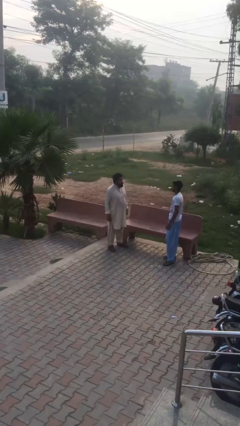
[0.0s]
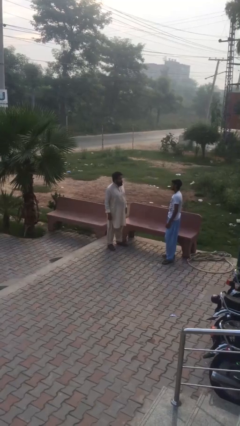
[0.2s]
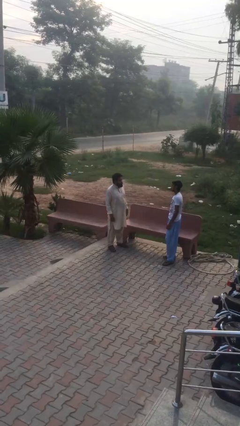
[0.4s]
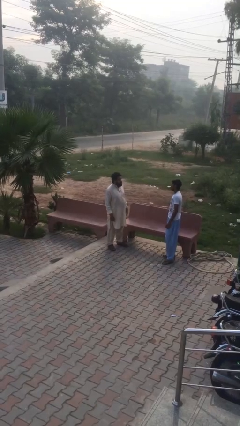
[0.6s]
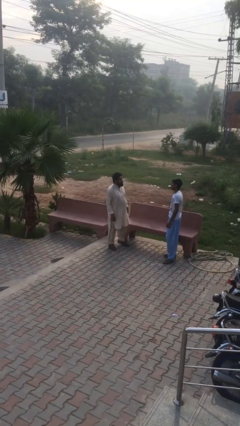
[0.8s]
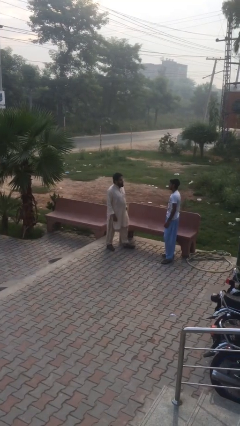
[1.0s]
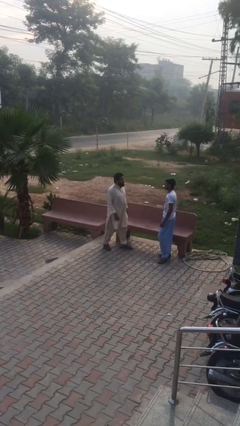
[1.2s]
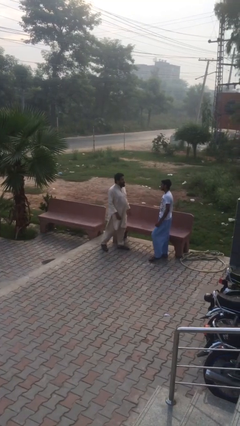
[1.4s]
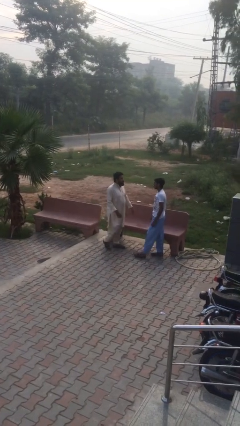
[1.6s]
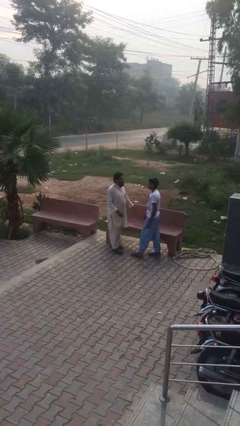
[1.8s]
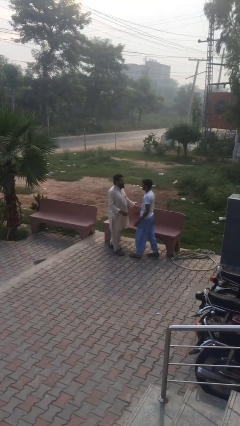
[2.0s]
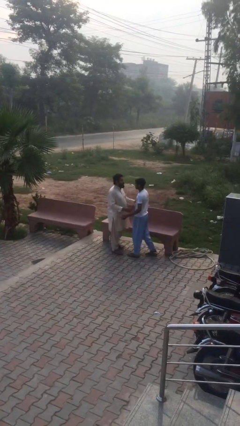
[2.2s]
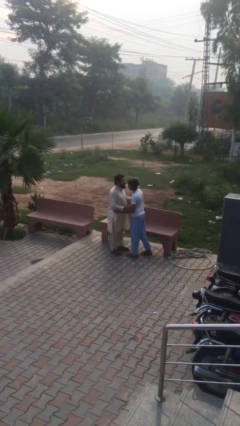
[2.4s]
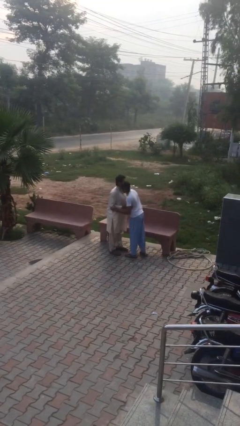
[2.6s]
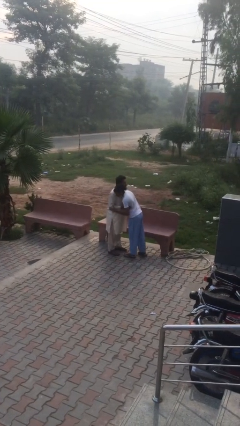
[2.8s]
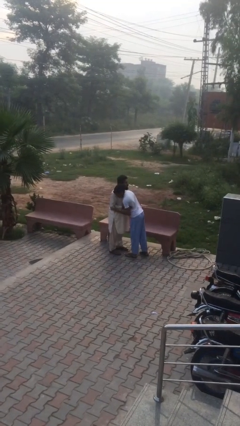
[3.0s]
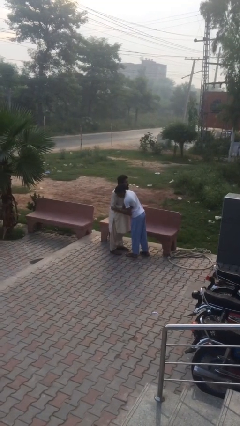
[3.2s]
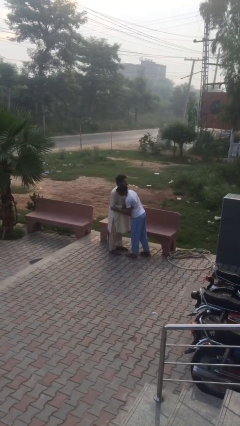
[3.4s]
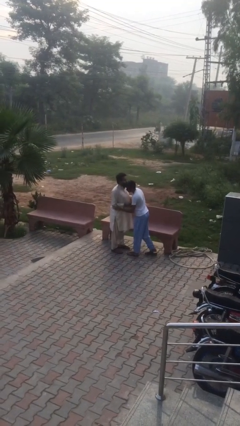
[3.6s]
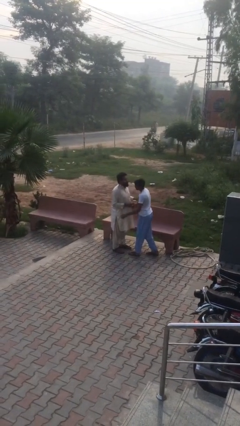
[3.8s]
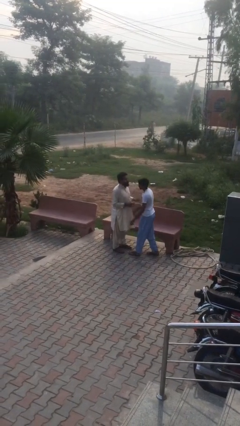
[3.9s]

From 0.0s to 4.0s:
person embraces person

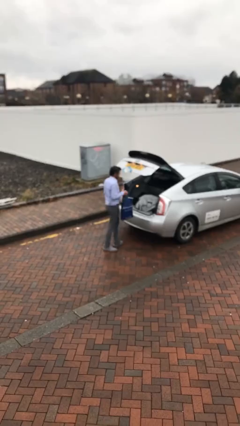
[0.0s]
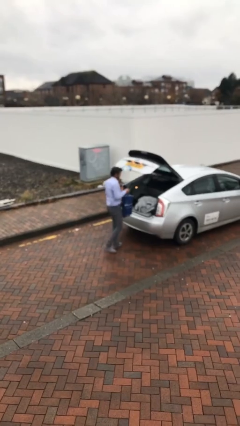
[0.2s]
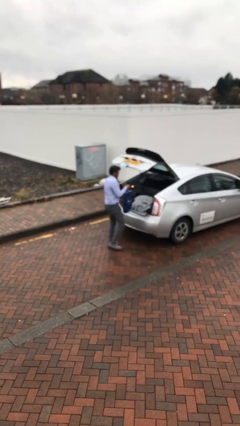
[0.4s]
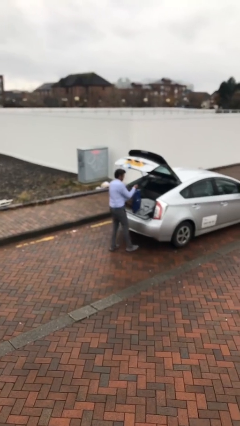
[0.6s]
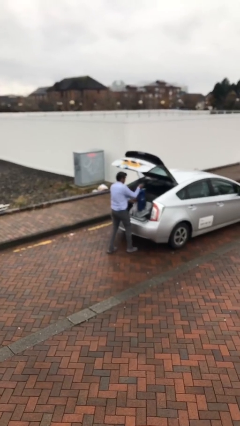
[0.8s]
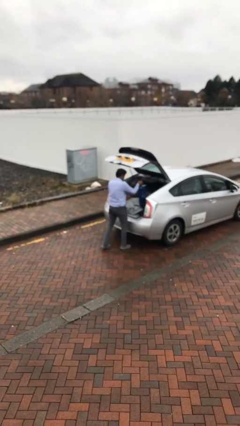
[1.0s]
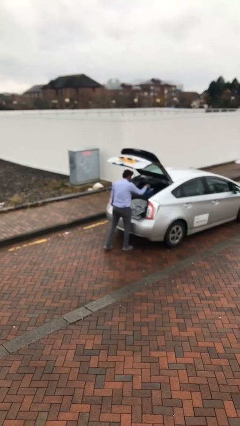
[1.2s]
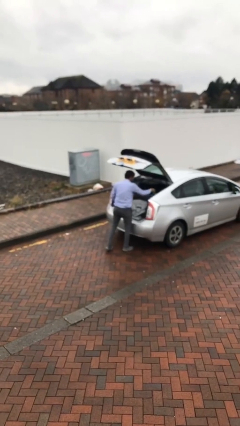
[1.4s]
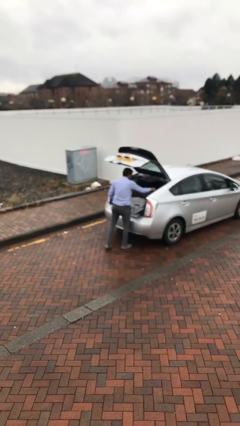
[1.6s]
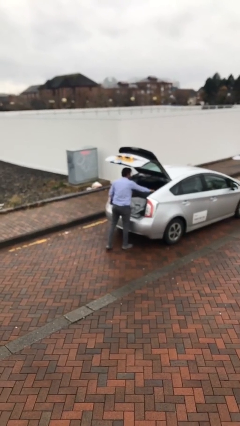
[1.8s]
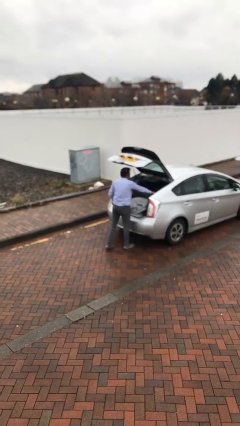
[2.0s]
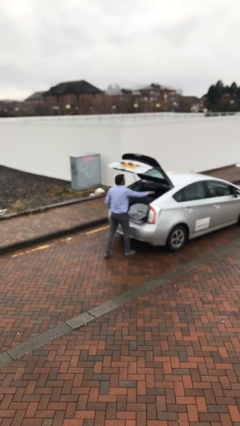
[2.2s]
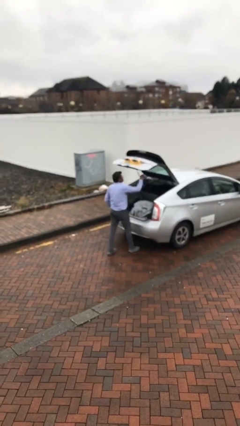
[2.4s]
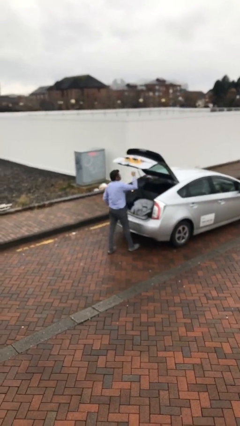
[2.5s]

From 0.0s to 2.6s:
person loads car

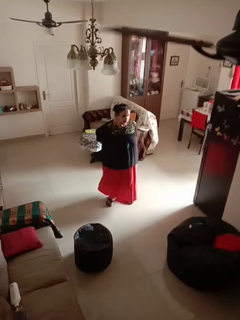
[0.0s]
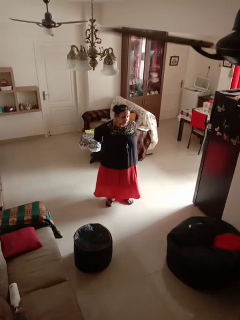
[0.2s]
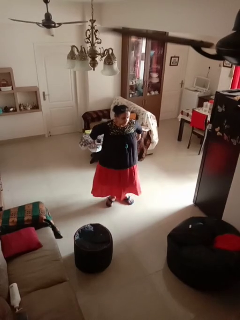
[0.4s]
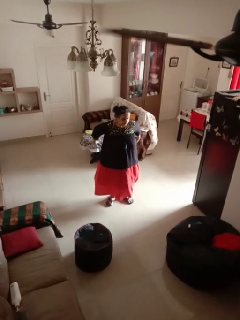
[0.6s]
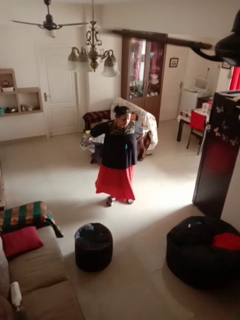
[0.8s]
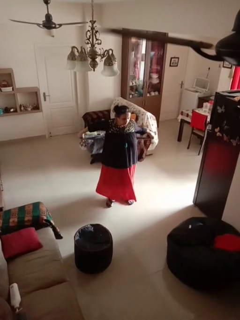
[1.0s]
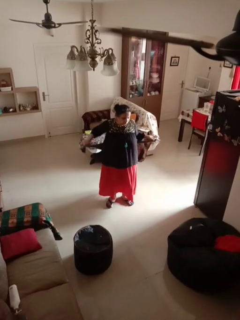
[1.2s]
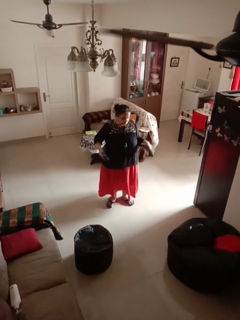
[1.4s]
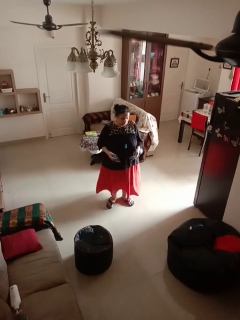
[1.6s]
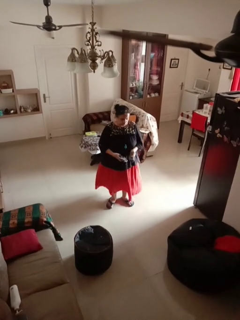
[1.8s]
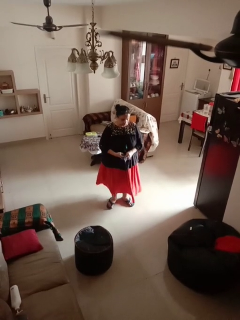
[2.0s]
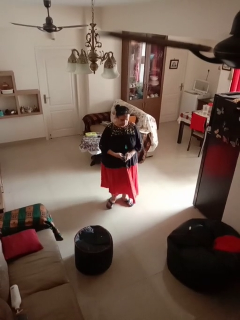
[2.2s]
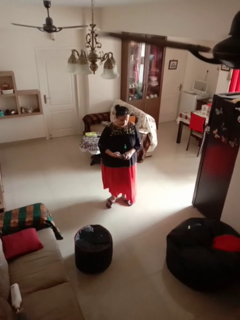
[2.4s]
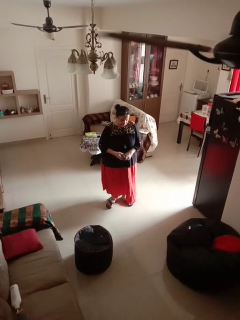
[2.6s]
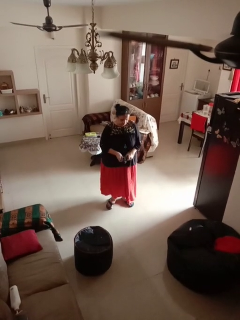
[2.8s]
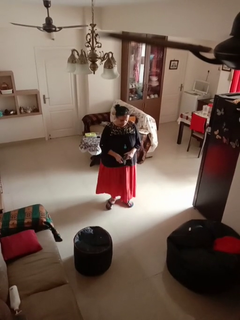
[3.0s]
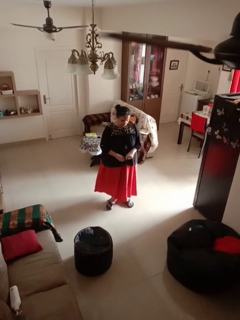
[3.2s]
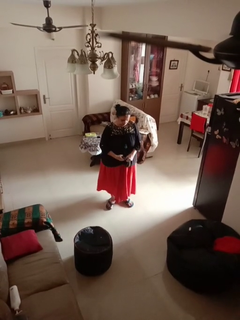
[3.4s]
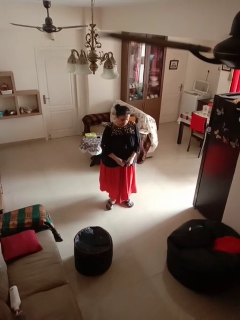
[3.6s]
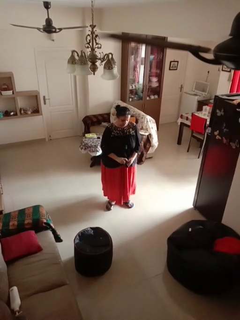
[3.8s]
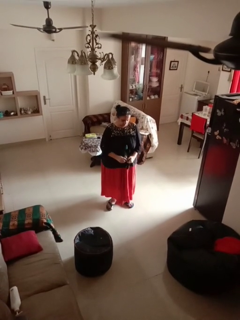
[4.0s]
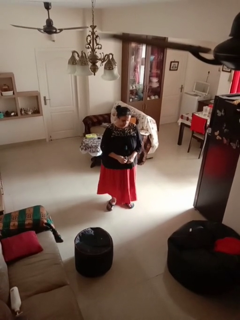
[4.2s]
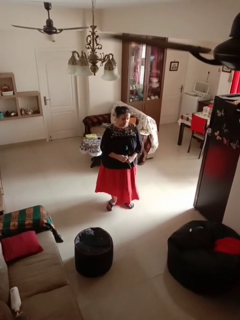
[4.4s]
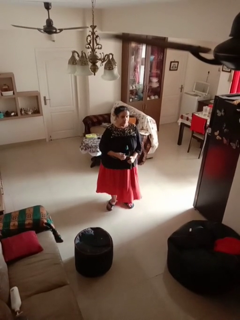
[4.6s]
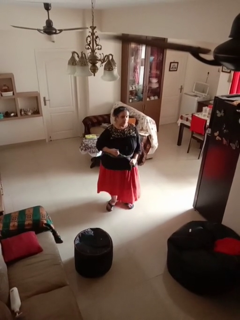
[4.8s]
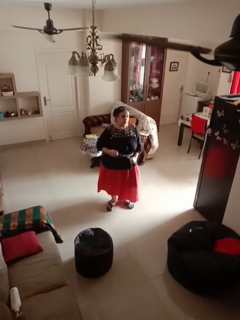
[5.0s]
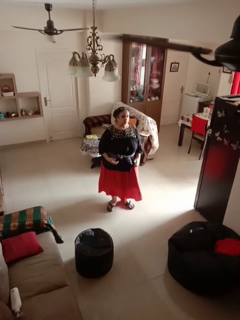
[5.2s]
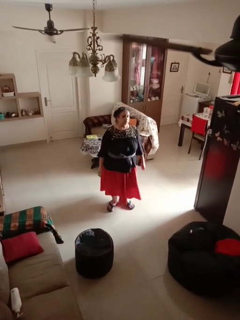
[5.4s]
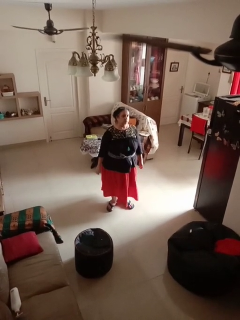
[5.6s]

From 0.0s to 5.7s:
person ties jacket around waist

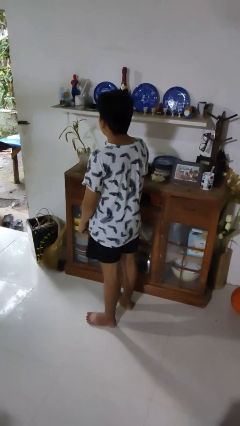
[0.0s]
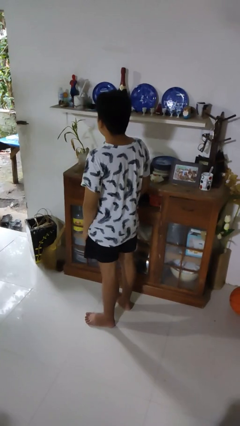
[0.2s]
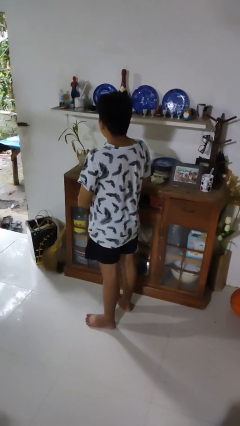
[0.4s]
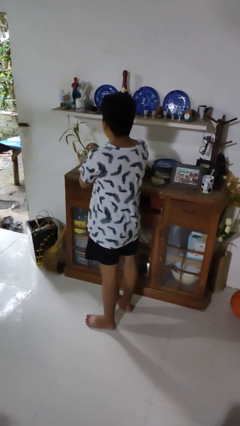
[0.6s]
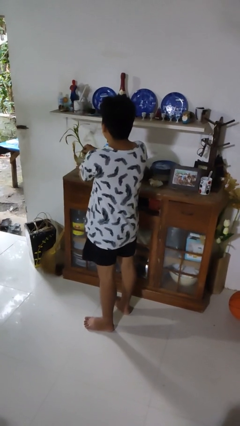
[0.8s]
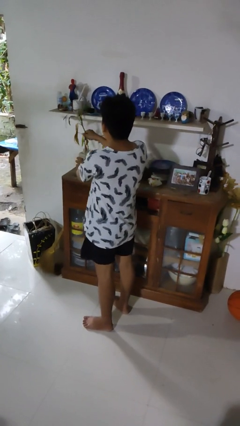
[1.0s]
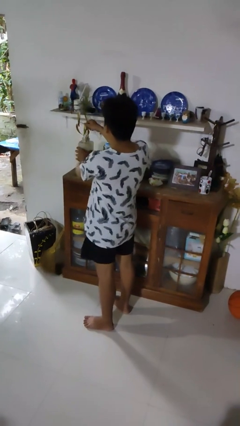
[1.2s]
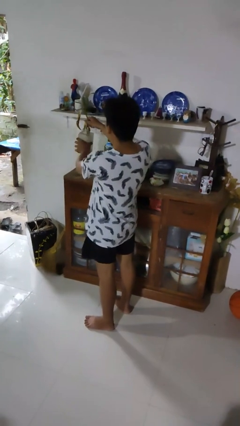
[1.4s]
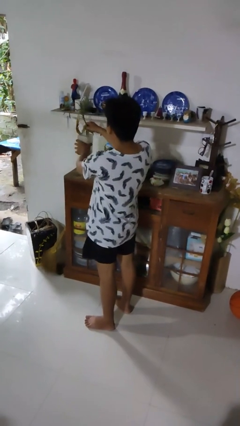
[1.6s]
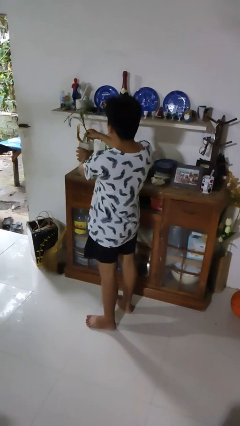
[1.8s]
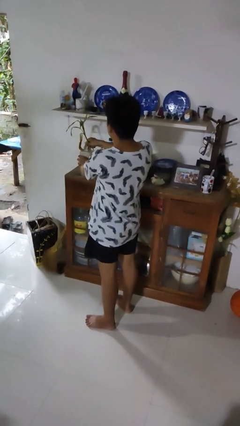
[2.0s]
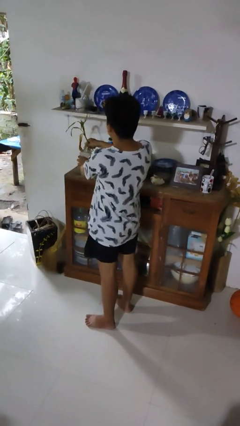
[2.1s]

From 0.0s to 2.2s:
person arranges flowers in vase

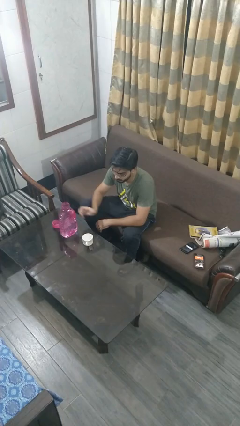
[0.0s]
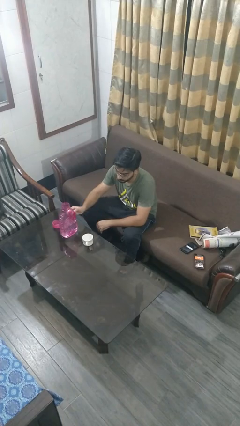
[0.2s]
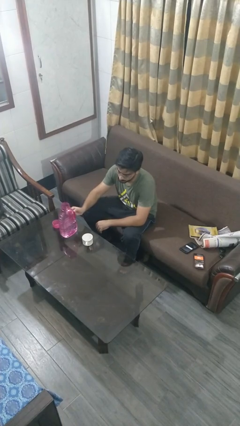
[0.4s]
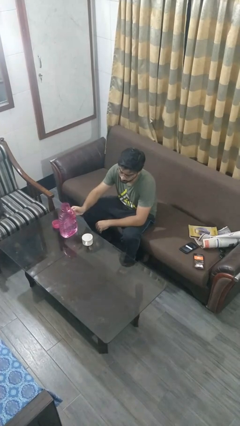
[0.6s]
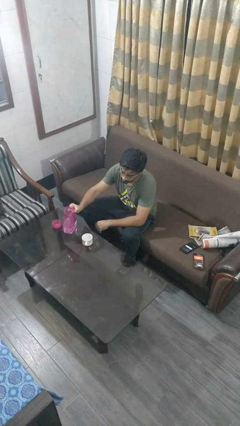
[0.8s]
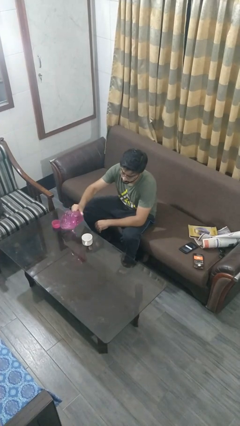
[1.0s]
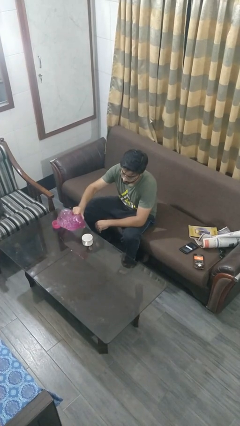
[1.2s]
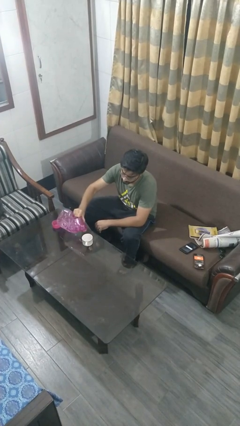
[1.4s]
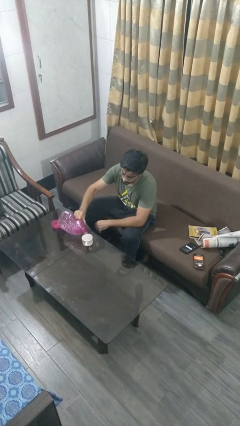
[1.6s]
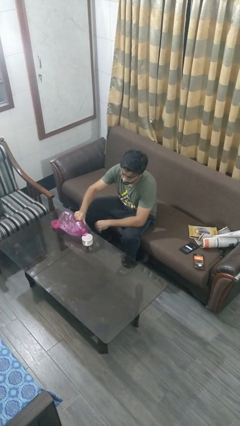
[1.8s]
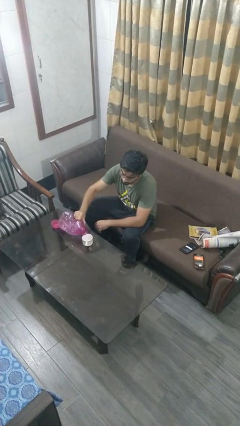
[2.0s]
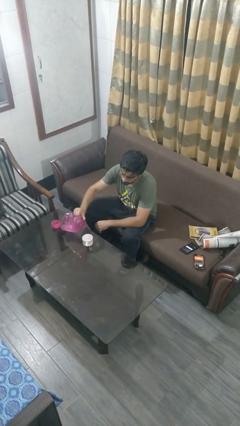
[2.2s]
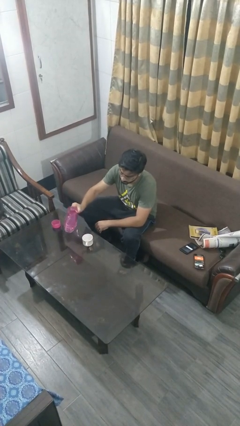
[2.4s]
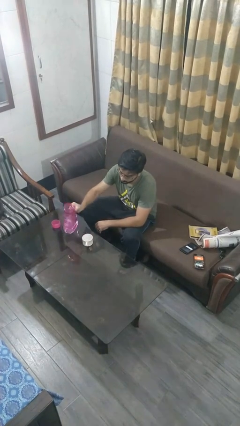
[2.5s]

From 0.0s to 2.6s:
person pours liquid into cup

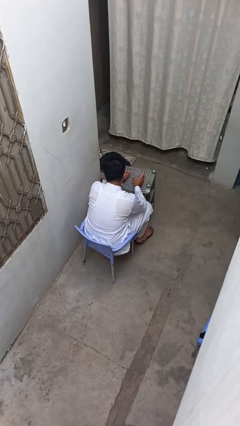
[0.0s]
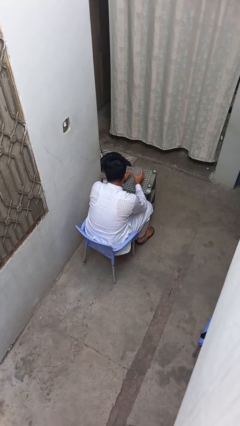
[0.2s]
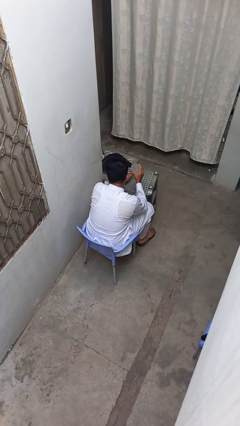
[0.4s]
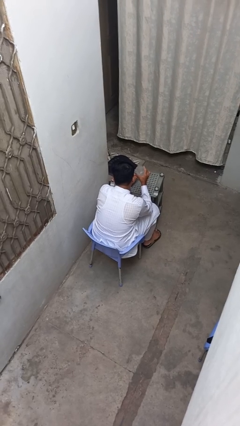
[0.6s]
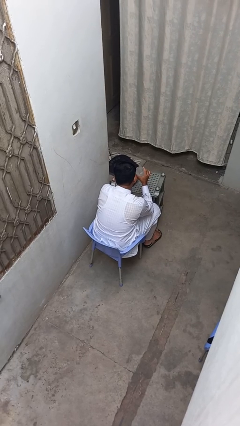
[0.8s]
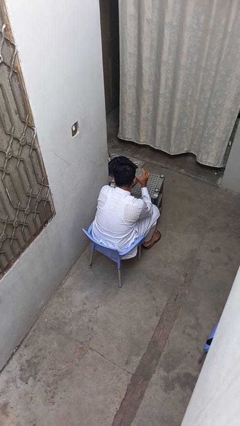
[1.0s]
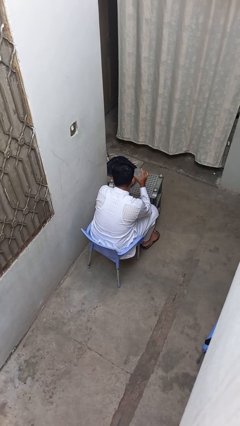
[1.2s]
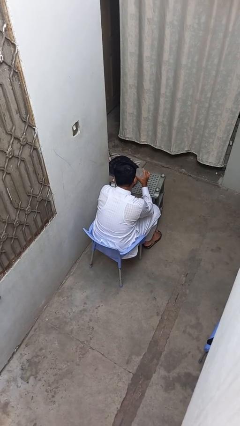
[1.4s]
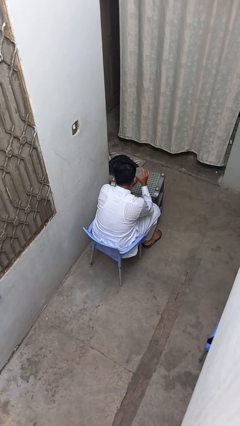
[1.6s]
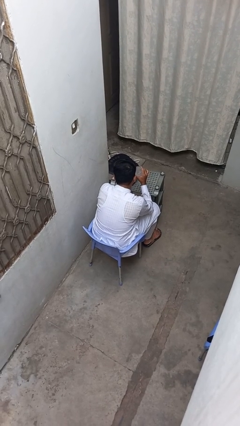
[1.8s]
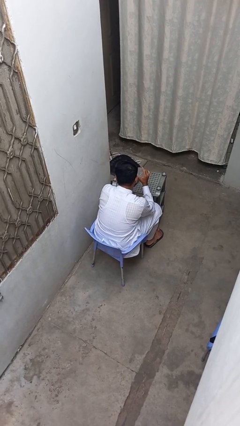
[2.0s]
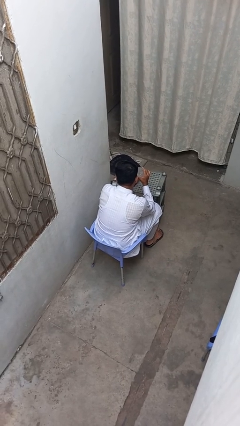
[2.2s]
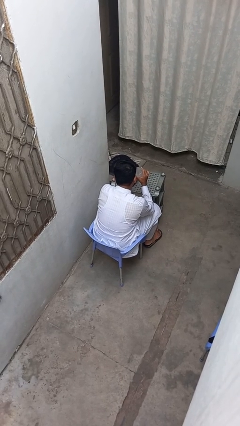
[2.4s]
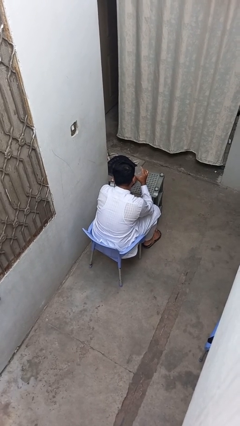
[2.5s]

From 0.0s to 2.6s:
person picks up object from table
